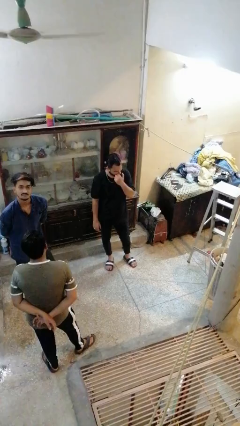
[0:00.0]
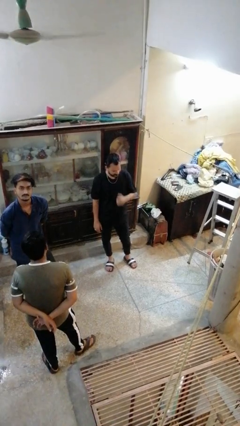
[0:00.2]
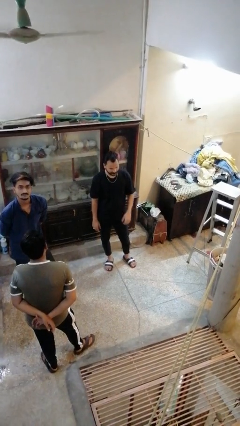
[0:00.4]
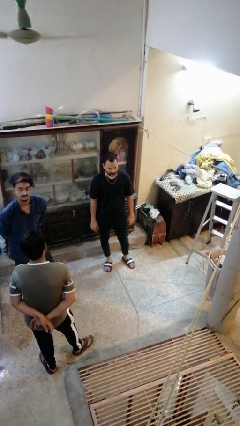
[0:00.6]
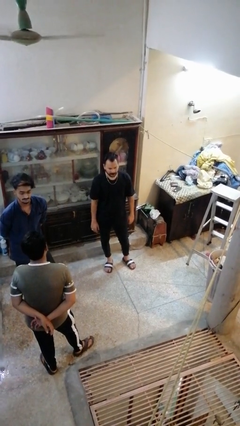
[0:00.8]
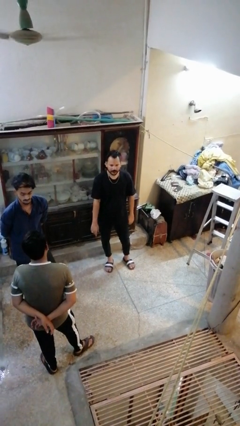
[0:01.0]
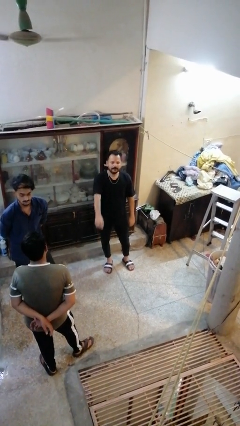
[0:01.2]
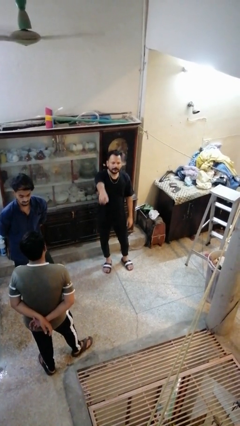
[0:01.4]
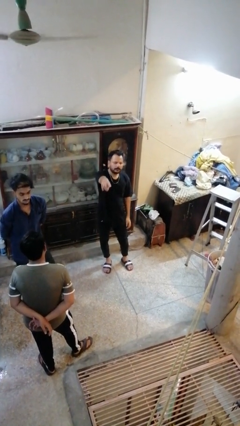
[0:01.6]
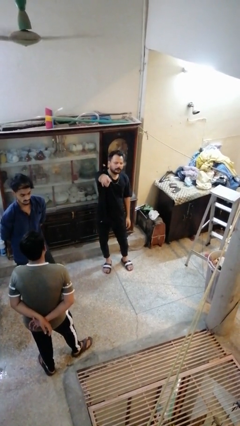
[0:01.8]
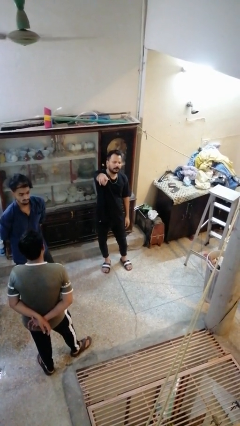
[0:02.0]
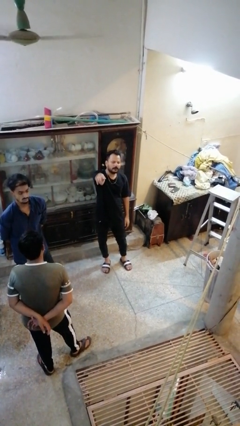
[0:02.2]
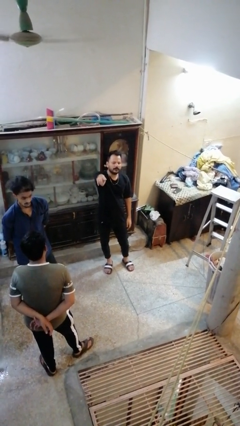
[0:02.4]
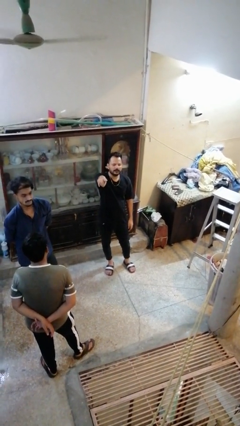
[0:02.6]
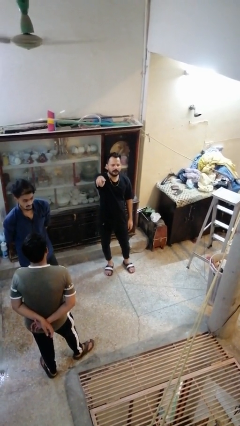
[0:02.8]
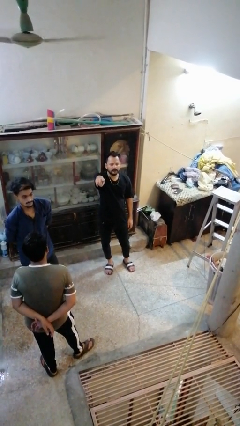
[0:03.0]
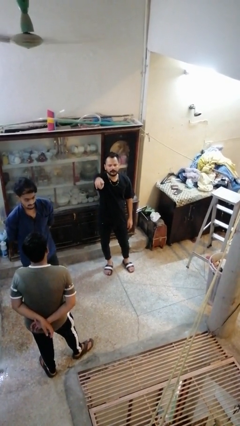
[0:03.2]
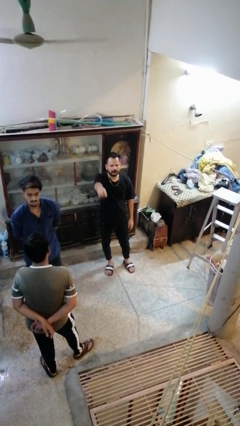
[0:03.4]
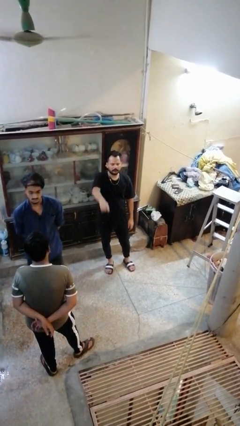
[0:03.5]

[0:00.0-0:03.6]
person points at person

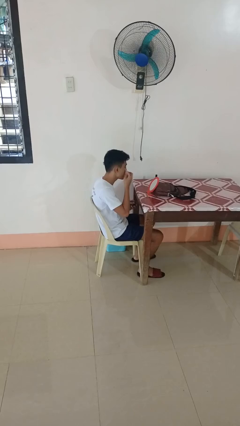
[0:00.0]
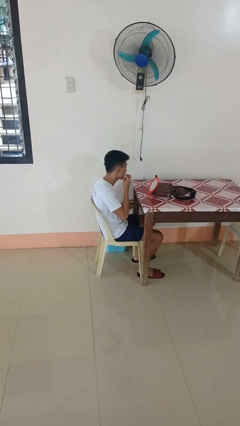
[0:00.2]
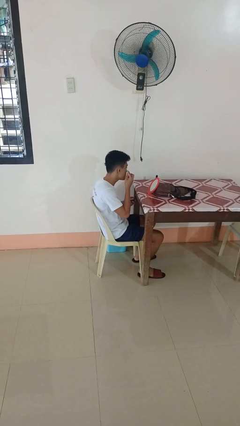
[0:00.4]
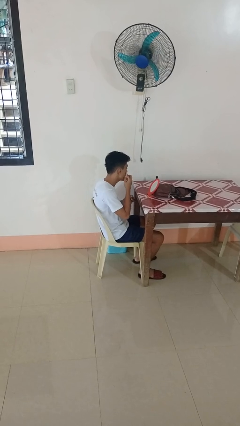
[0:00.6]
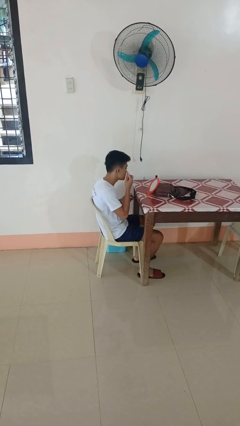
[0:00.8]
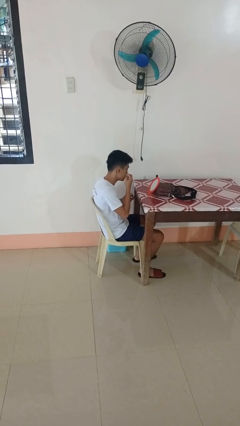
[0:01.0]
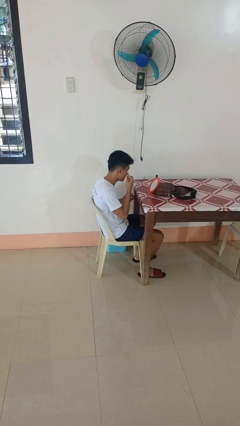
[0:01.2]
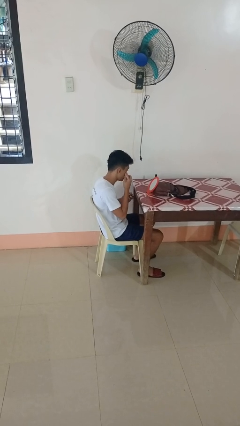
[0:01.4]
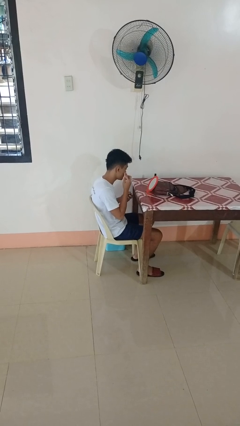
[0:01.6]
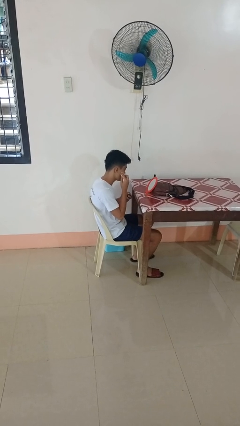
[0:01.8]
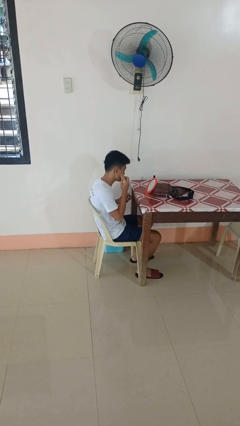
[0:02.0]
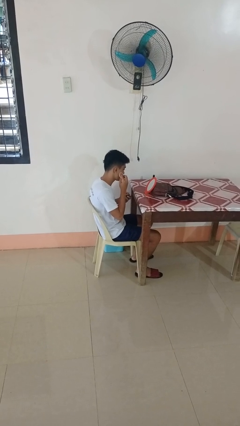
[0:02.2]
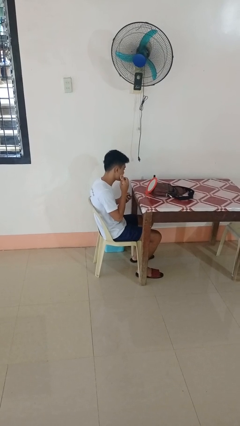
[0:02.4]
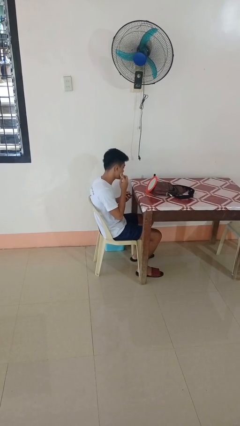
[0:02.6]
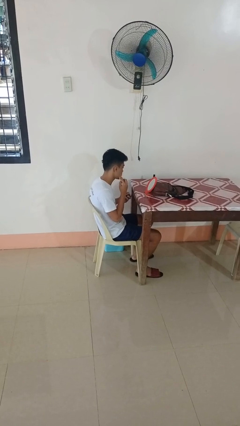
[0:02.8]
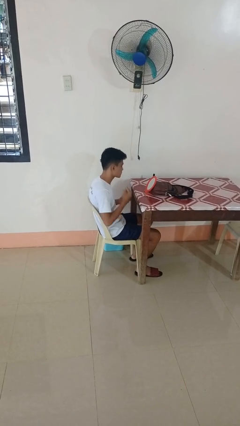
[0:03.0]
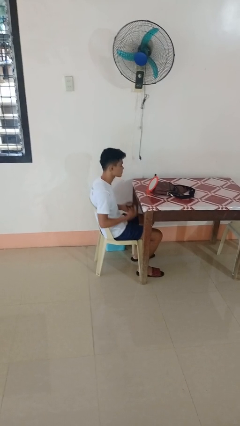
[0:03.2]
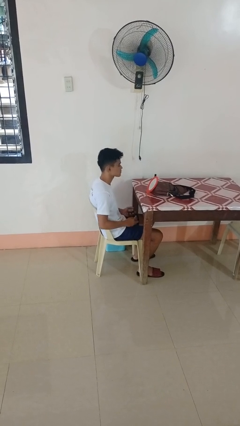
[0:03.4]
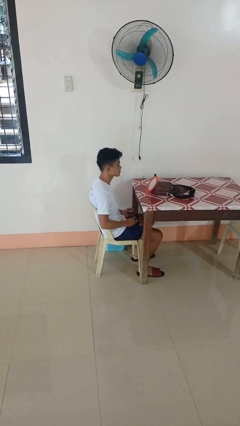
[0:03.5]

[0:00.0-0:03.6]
person applies foundation makeup

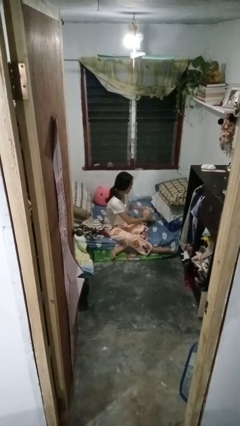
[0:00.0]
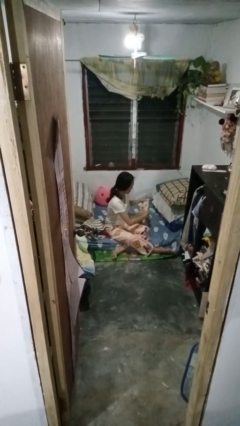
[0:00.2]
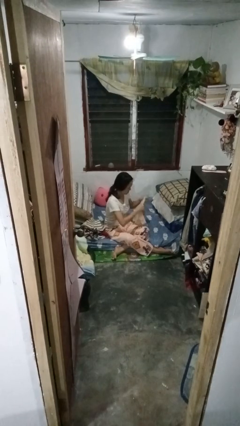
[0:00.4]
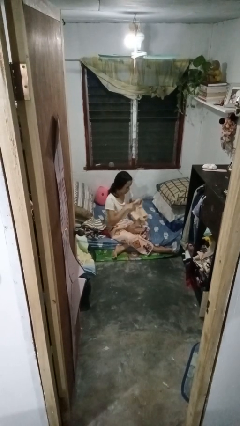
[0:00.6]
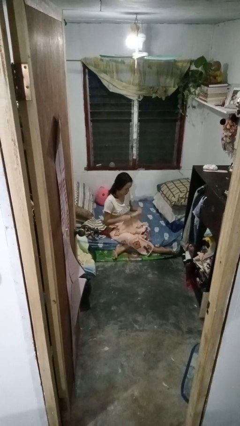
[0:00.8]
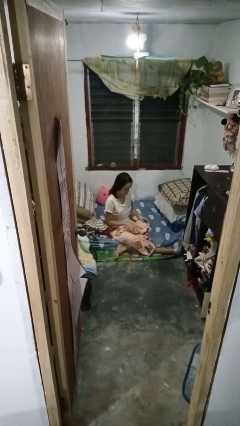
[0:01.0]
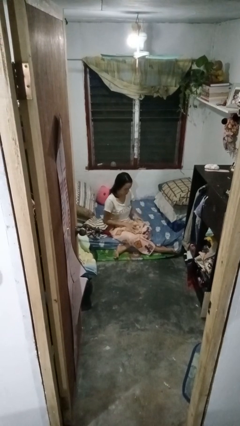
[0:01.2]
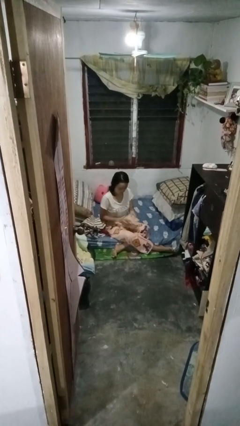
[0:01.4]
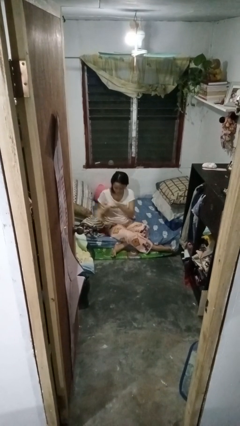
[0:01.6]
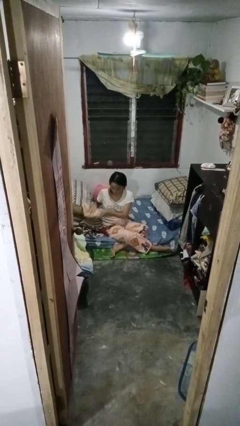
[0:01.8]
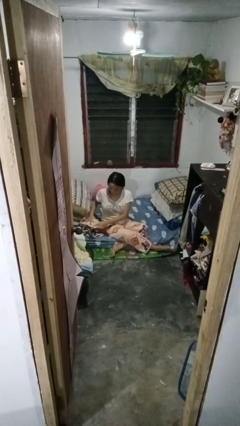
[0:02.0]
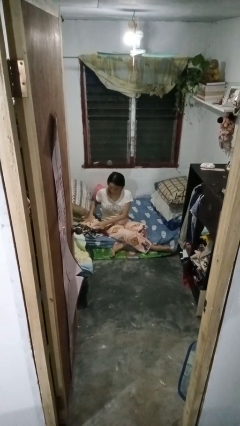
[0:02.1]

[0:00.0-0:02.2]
person folds shirt

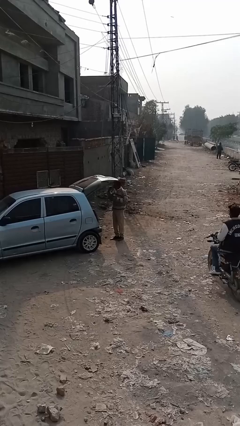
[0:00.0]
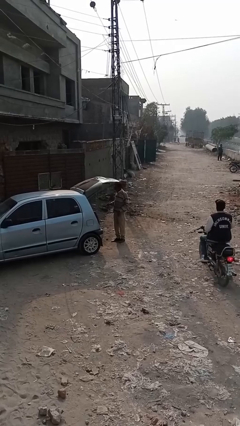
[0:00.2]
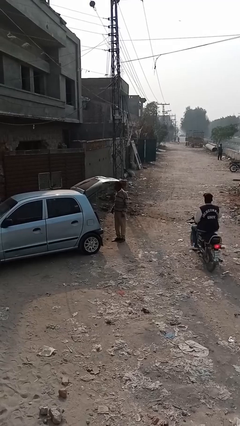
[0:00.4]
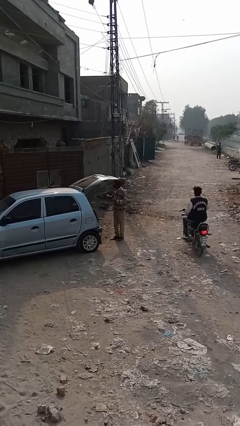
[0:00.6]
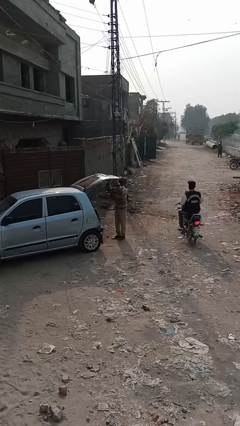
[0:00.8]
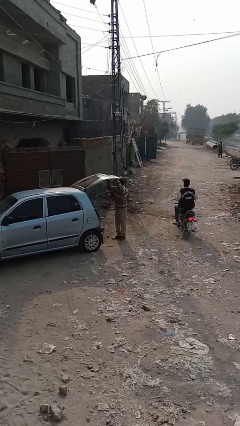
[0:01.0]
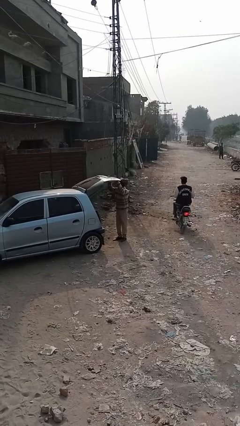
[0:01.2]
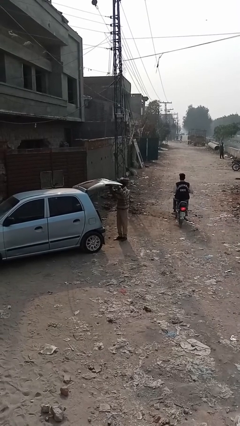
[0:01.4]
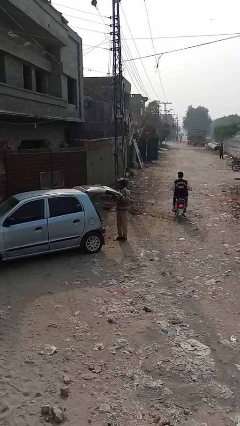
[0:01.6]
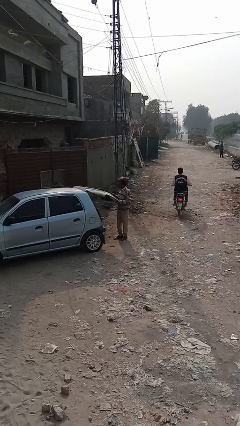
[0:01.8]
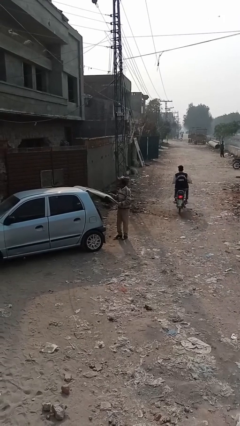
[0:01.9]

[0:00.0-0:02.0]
person closes car trunk

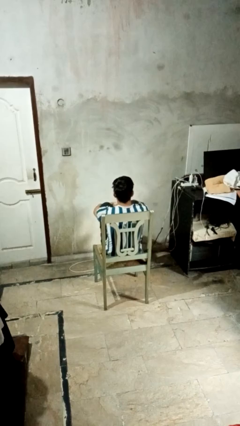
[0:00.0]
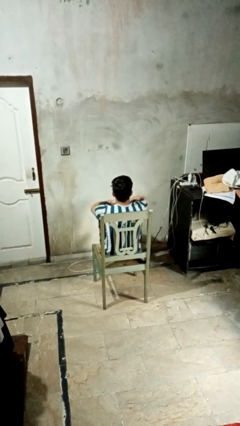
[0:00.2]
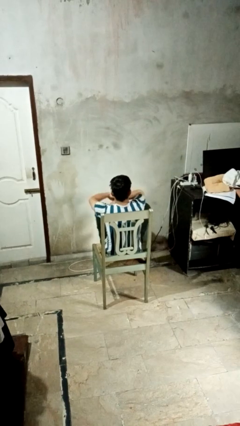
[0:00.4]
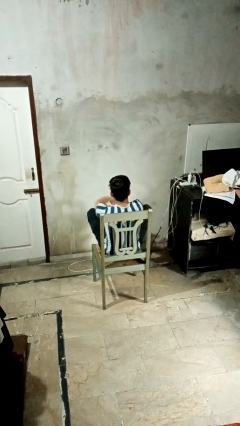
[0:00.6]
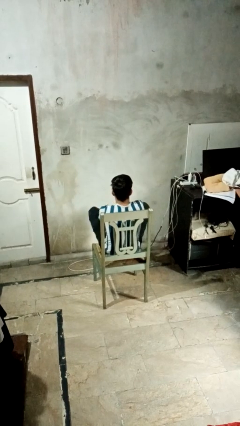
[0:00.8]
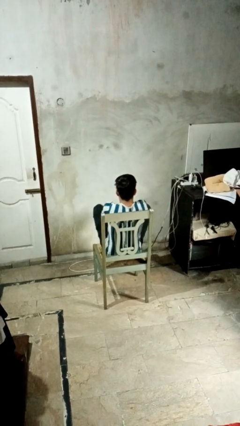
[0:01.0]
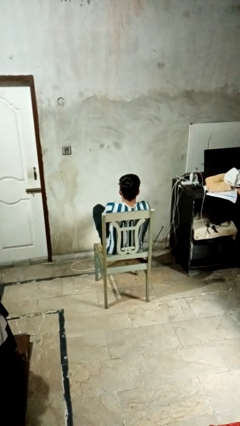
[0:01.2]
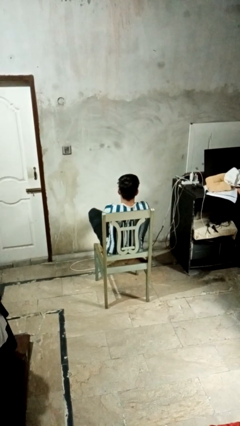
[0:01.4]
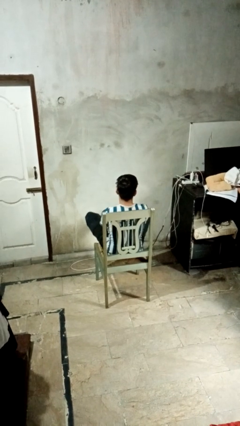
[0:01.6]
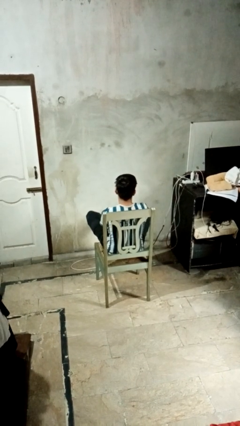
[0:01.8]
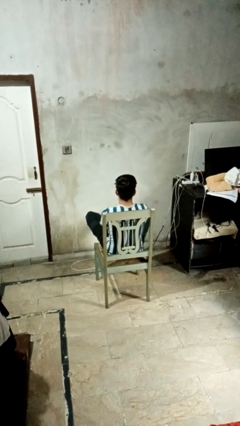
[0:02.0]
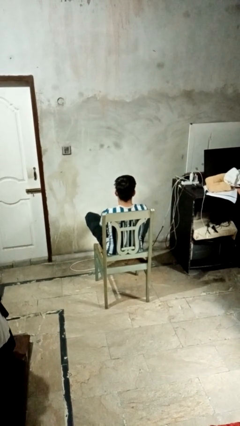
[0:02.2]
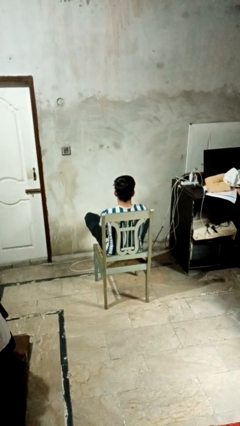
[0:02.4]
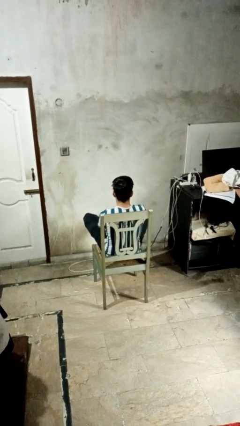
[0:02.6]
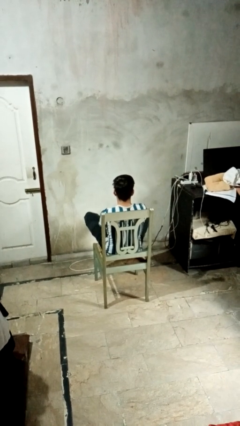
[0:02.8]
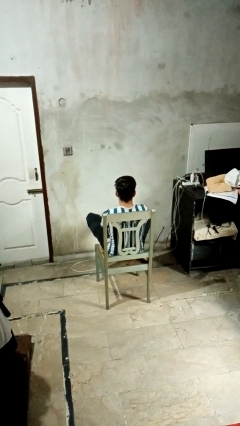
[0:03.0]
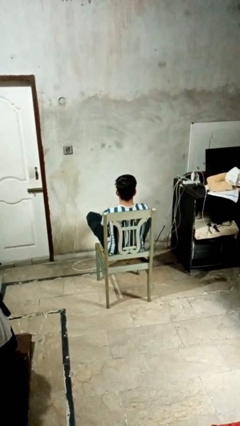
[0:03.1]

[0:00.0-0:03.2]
person crosses legs

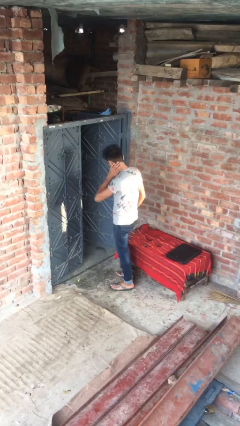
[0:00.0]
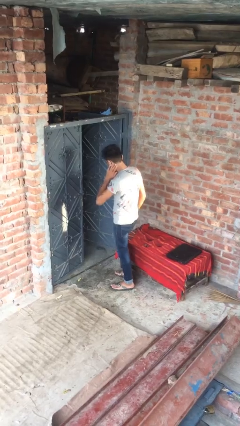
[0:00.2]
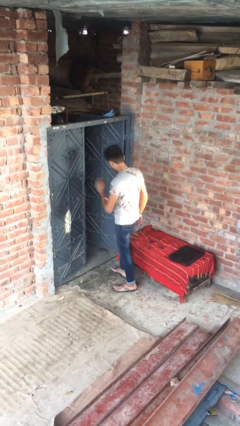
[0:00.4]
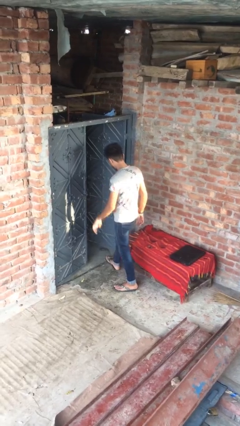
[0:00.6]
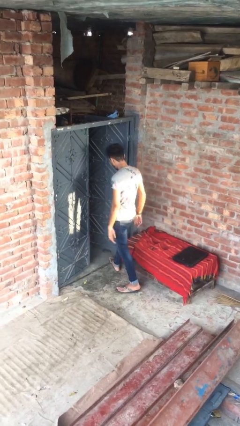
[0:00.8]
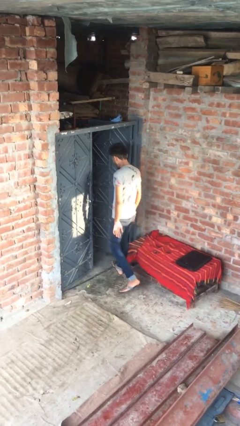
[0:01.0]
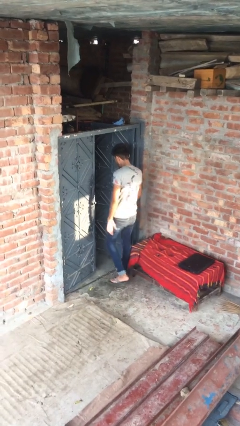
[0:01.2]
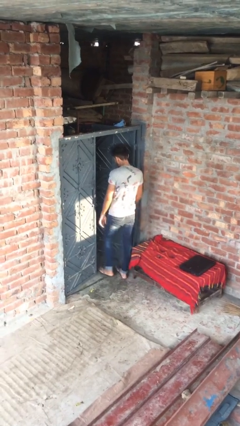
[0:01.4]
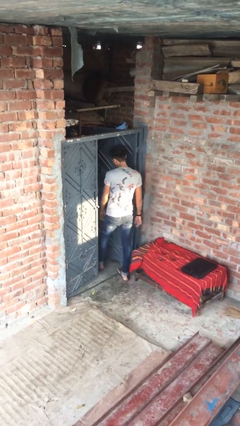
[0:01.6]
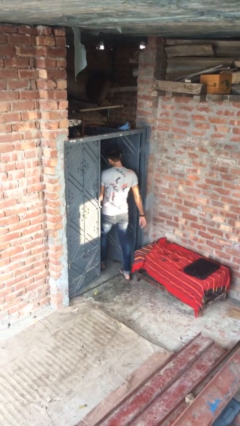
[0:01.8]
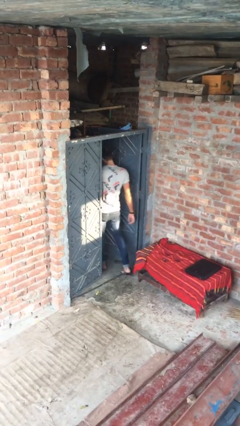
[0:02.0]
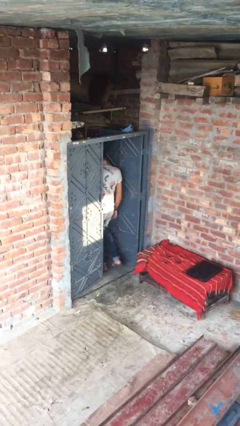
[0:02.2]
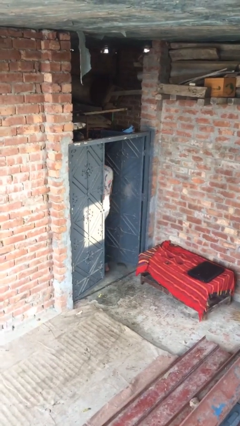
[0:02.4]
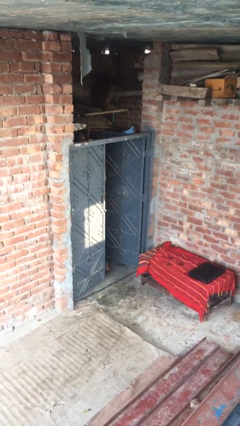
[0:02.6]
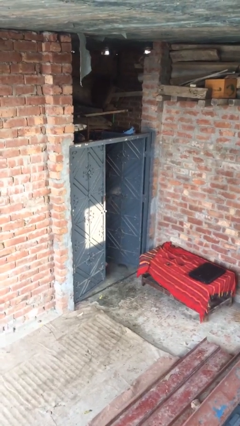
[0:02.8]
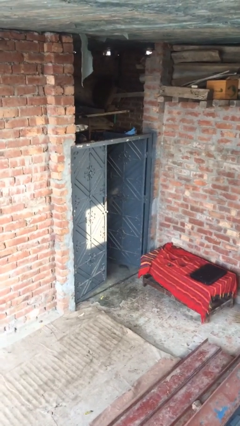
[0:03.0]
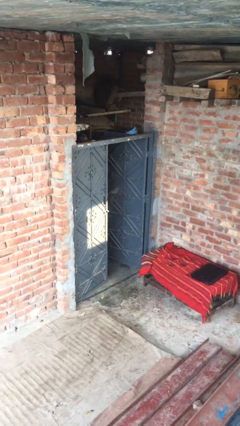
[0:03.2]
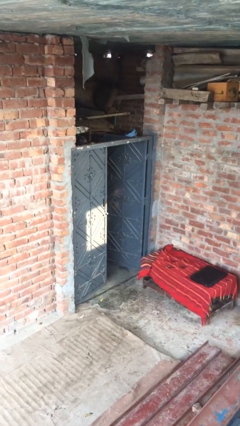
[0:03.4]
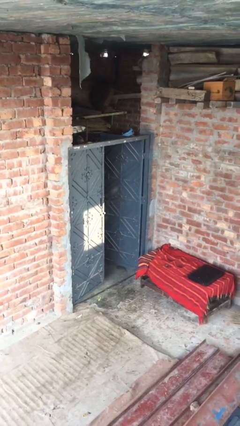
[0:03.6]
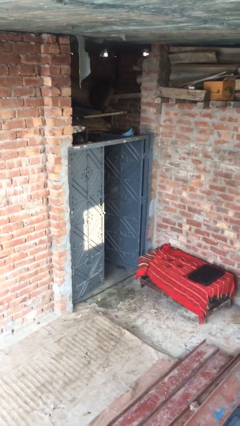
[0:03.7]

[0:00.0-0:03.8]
person exits scene through structure
